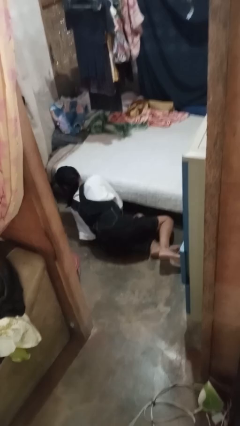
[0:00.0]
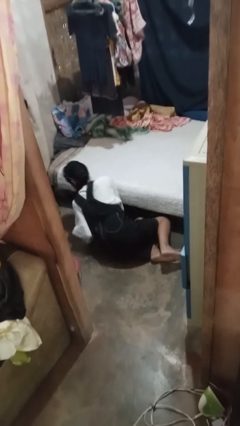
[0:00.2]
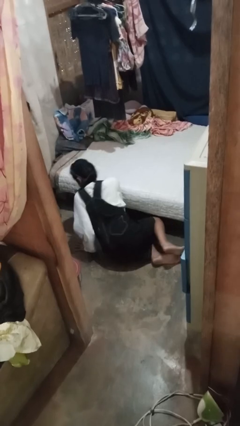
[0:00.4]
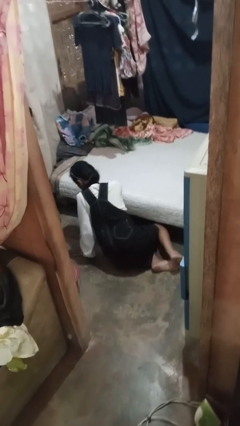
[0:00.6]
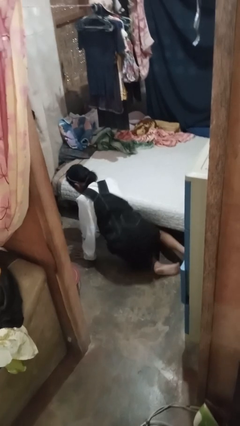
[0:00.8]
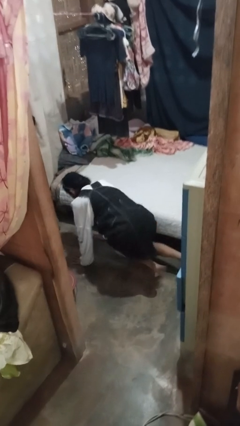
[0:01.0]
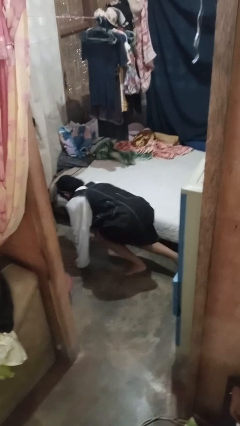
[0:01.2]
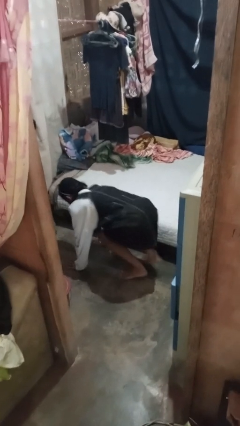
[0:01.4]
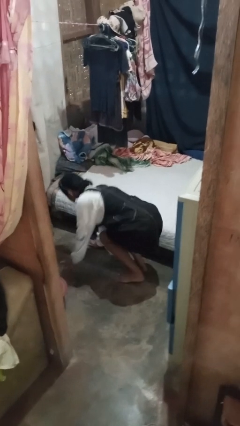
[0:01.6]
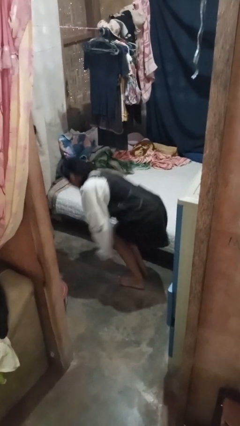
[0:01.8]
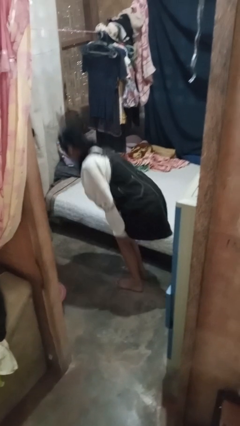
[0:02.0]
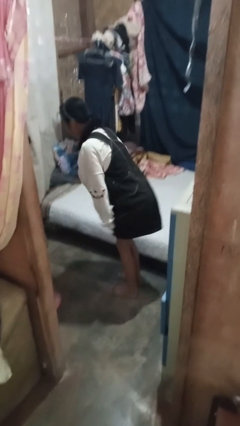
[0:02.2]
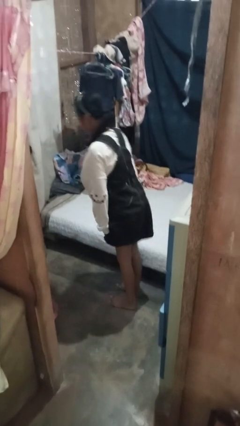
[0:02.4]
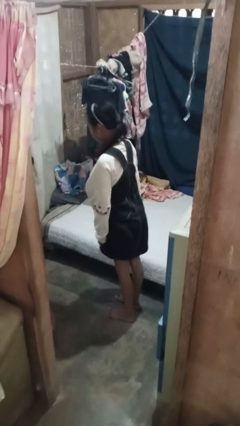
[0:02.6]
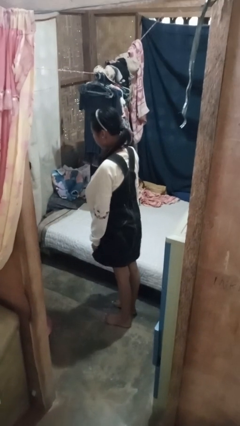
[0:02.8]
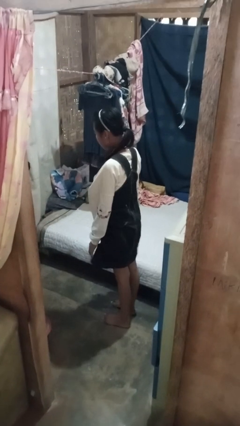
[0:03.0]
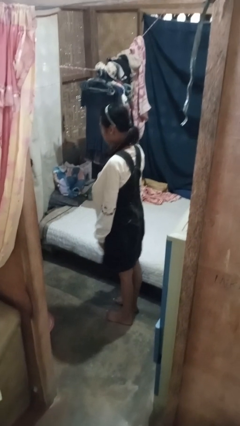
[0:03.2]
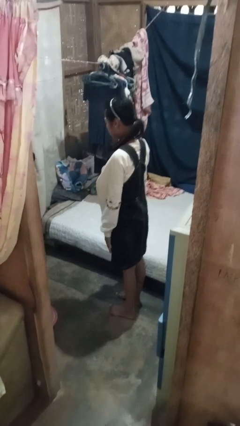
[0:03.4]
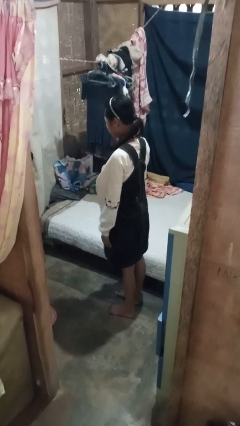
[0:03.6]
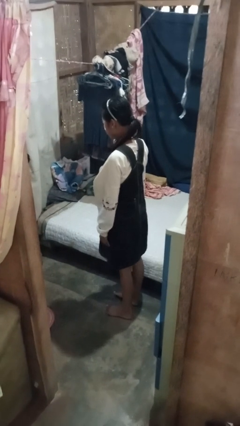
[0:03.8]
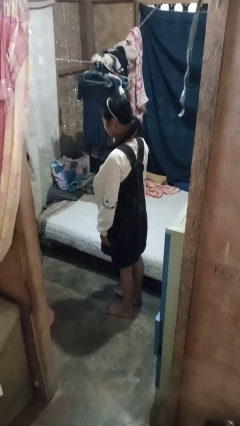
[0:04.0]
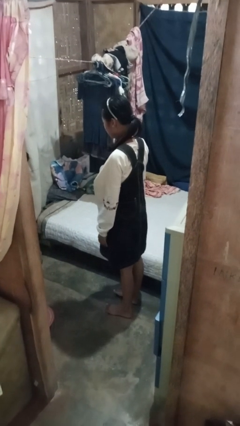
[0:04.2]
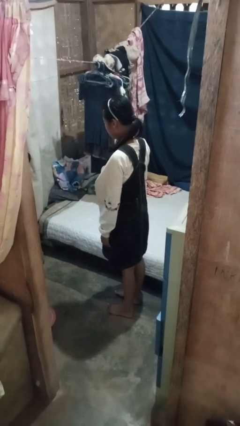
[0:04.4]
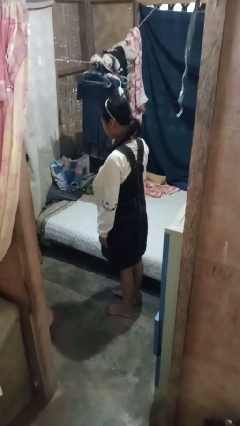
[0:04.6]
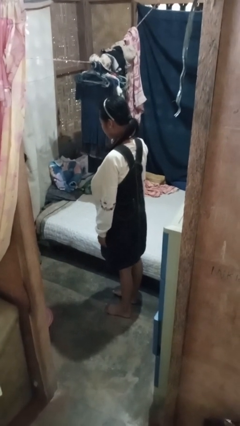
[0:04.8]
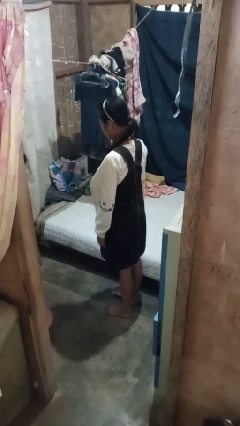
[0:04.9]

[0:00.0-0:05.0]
person stands up from floor

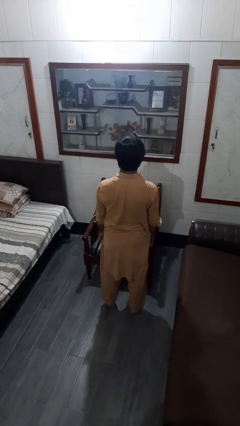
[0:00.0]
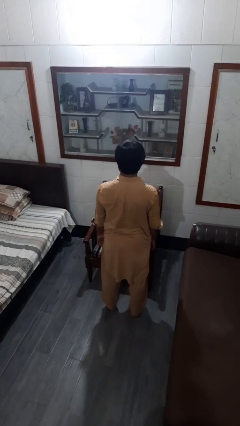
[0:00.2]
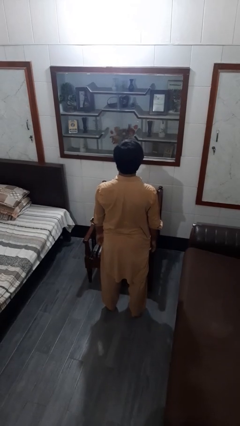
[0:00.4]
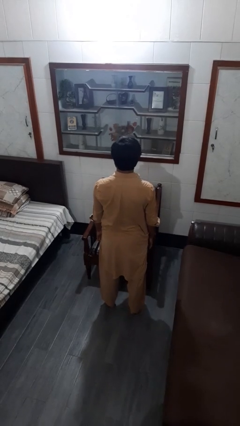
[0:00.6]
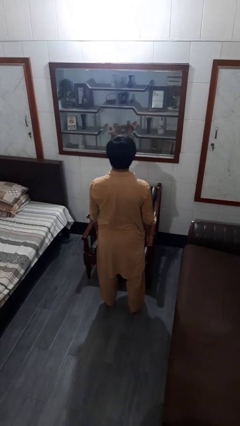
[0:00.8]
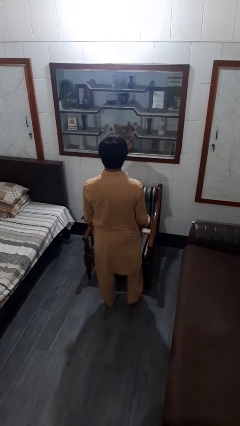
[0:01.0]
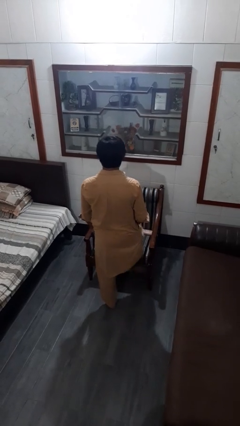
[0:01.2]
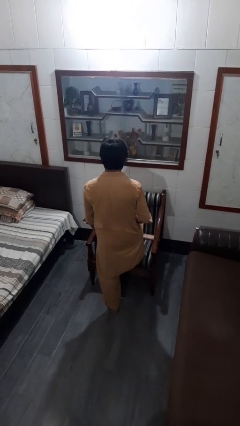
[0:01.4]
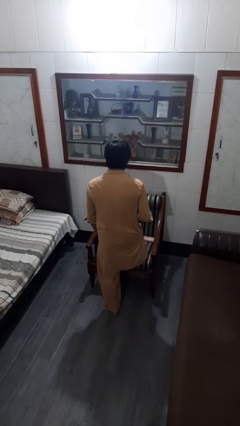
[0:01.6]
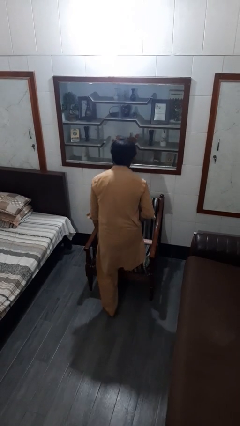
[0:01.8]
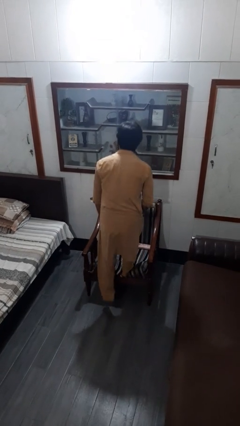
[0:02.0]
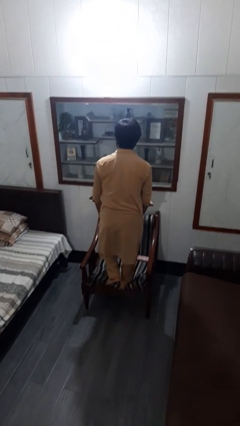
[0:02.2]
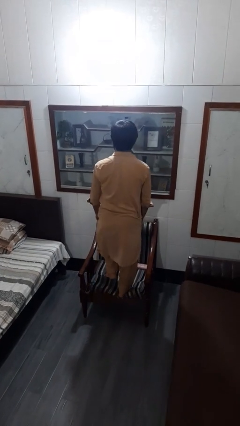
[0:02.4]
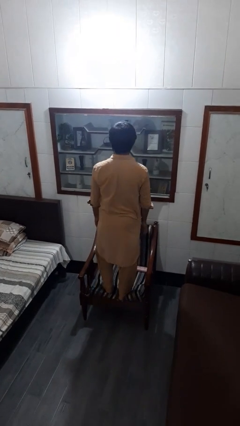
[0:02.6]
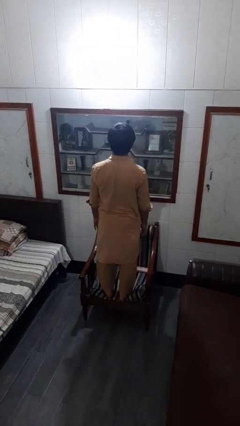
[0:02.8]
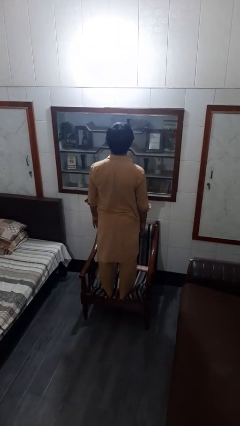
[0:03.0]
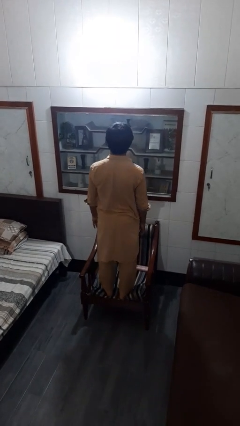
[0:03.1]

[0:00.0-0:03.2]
person climbs on chair

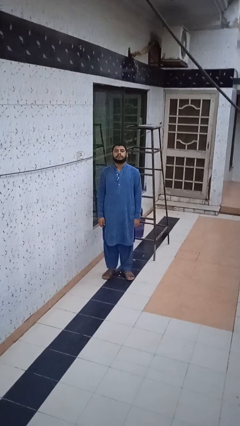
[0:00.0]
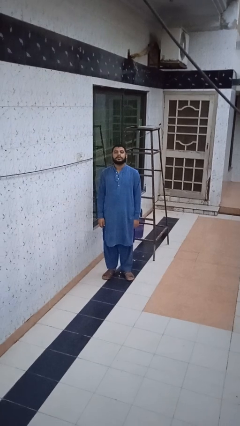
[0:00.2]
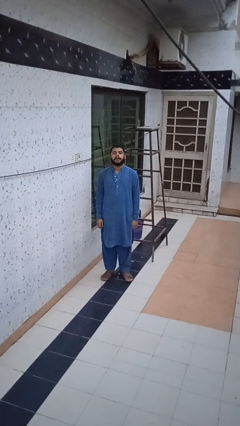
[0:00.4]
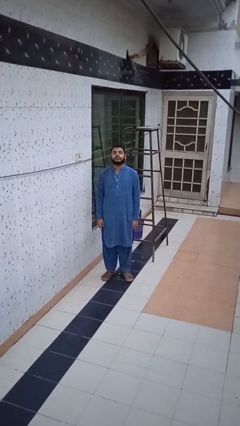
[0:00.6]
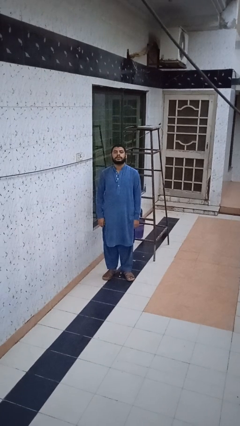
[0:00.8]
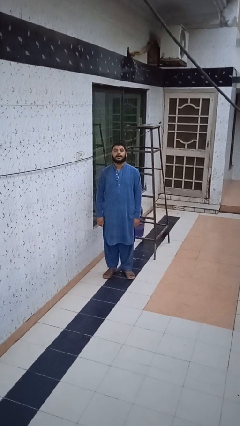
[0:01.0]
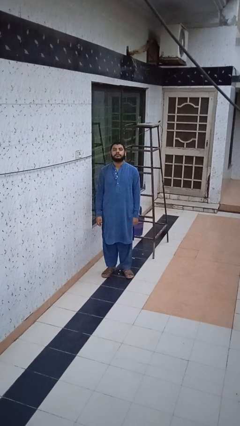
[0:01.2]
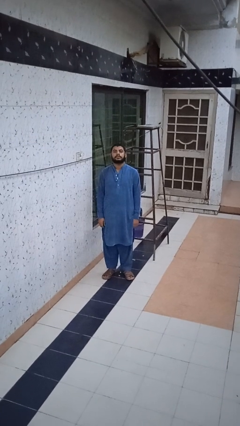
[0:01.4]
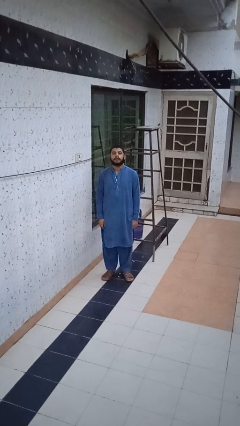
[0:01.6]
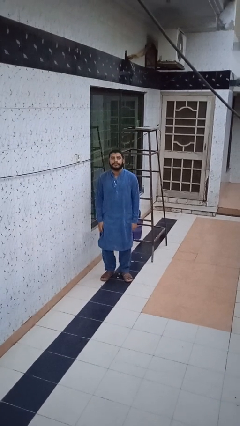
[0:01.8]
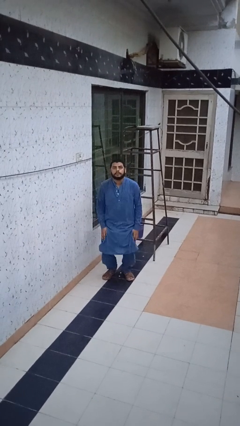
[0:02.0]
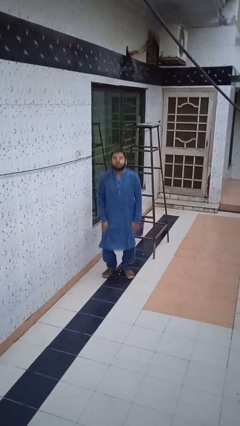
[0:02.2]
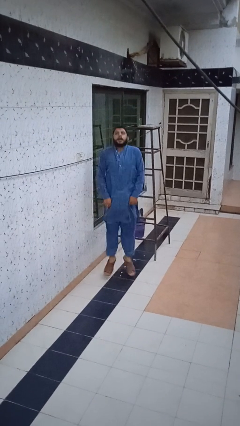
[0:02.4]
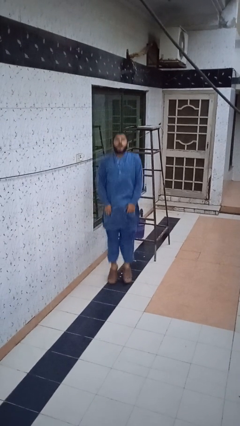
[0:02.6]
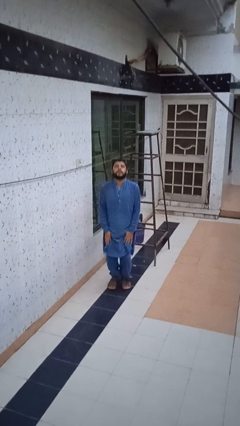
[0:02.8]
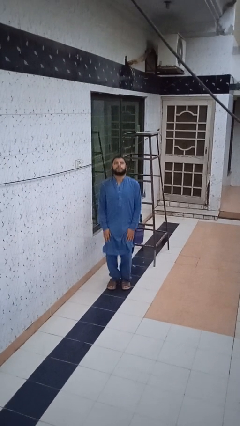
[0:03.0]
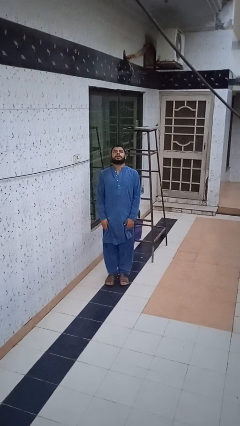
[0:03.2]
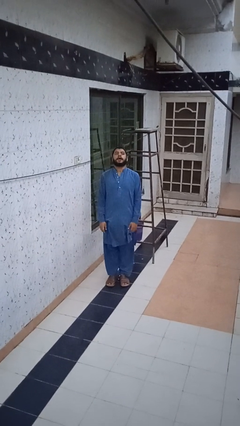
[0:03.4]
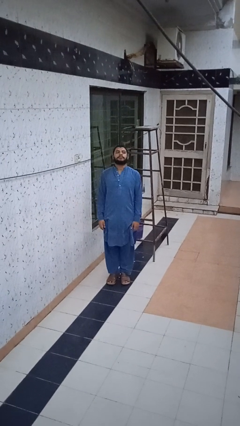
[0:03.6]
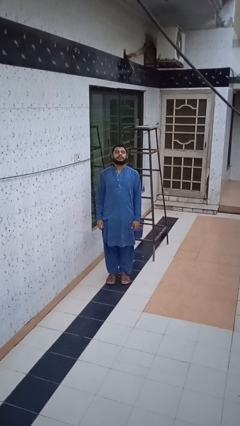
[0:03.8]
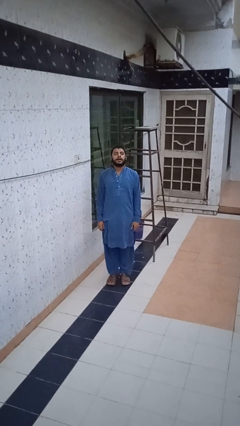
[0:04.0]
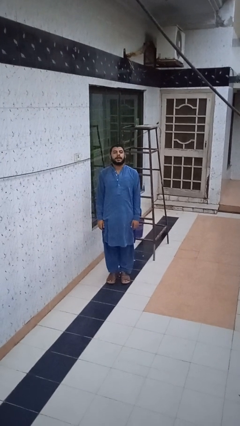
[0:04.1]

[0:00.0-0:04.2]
person jumps

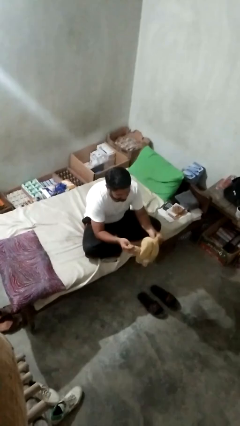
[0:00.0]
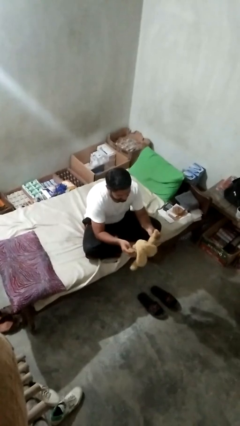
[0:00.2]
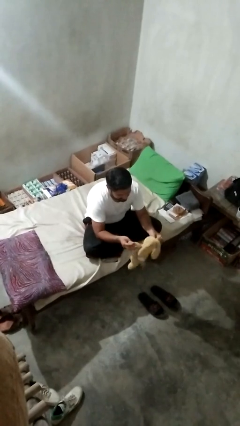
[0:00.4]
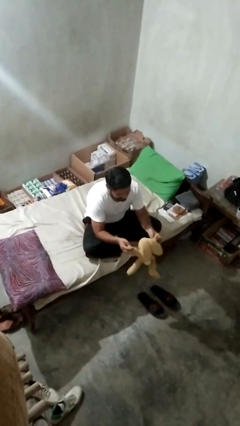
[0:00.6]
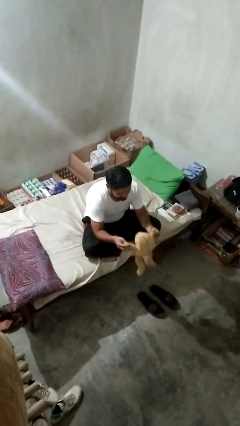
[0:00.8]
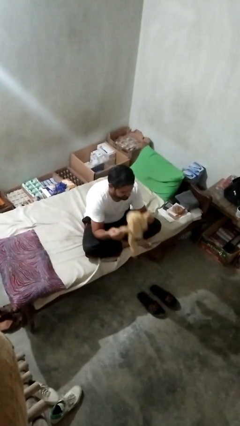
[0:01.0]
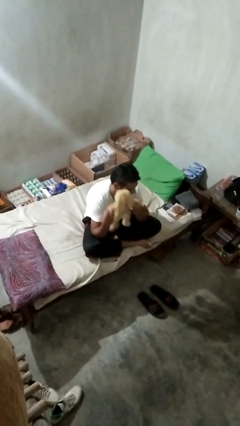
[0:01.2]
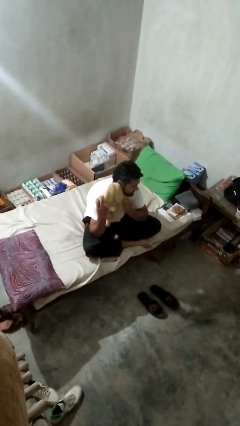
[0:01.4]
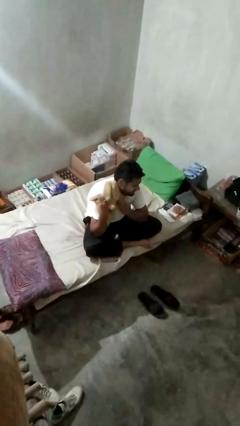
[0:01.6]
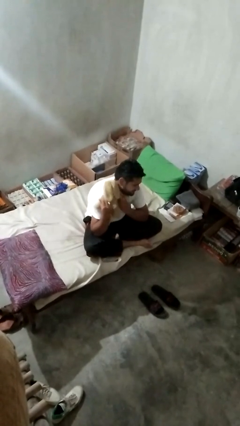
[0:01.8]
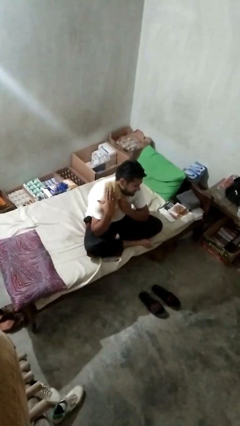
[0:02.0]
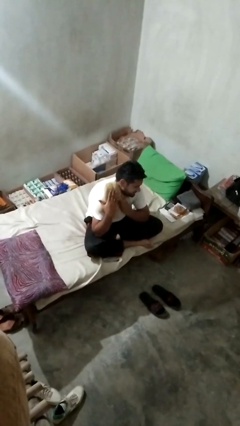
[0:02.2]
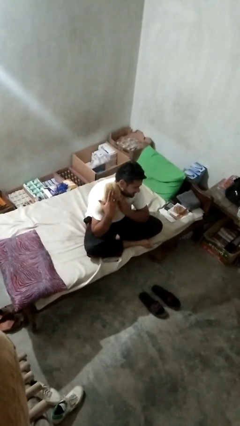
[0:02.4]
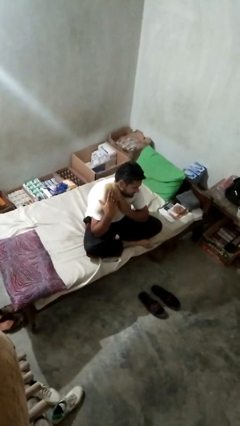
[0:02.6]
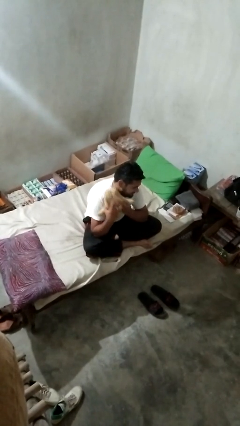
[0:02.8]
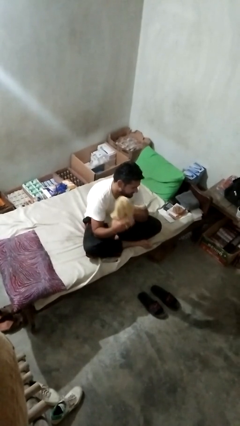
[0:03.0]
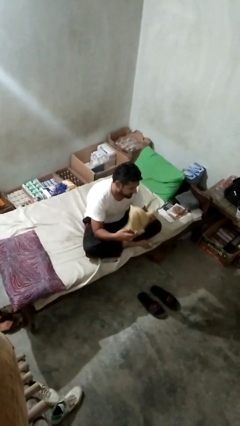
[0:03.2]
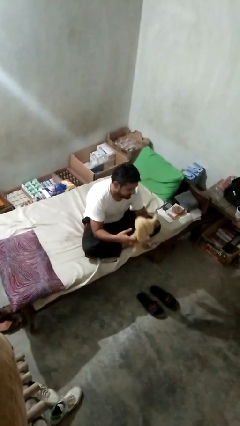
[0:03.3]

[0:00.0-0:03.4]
person hugs stuffed animal

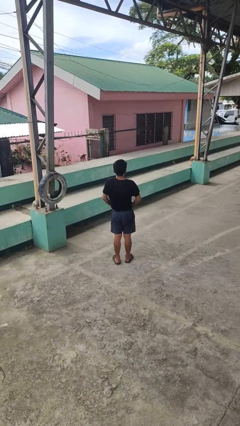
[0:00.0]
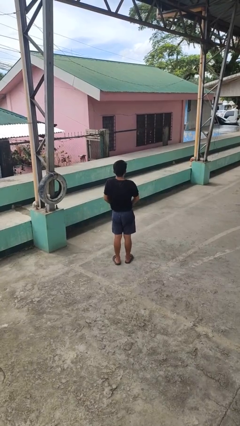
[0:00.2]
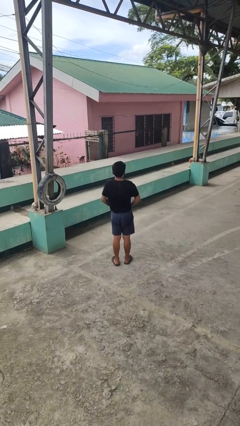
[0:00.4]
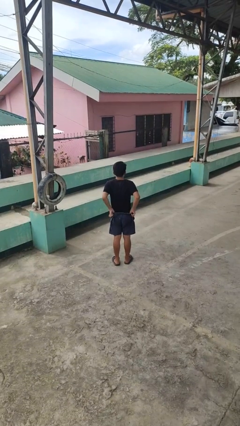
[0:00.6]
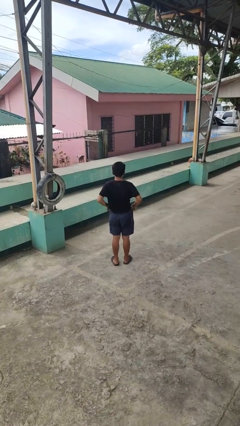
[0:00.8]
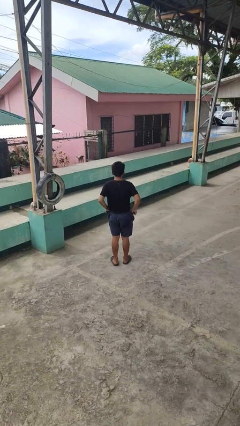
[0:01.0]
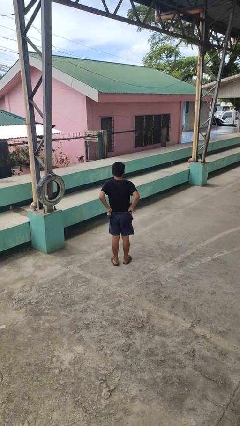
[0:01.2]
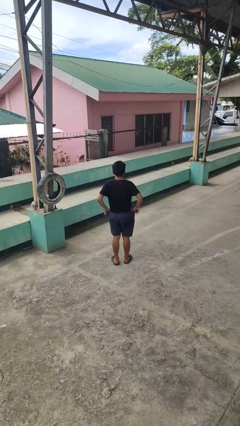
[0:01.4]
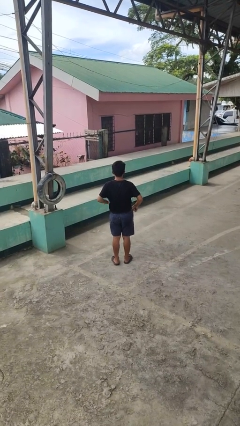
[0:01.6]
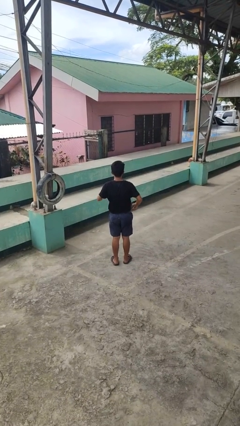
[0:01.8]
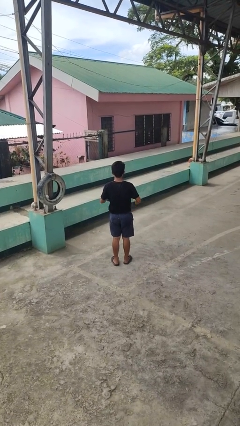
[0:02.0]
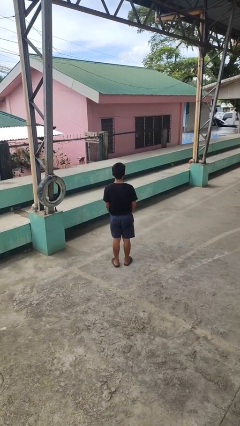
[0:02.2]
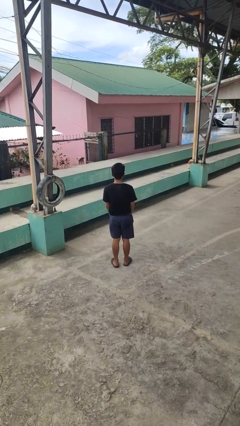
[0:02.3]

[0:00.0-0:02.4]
person hikes up pants
